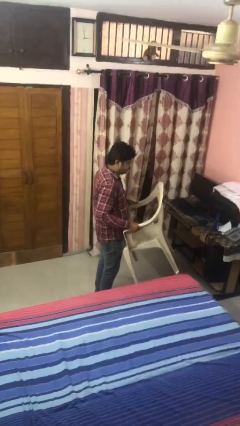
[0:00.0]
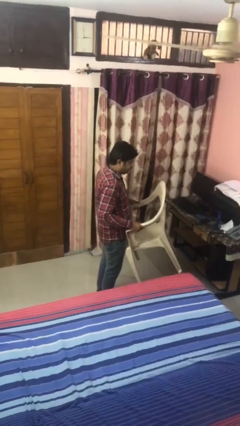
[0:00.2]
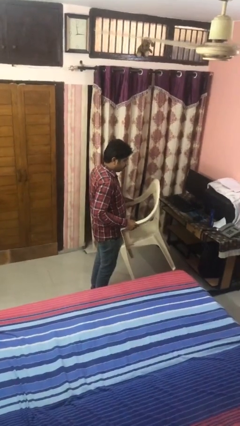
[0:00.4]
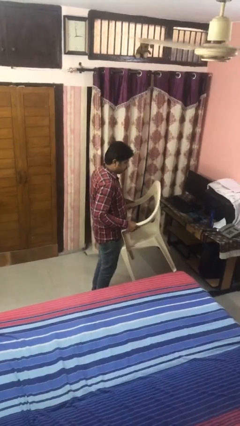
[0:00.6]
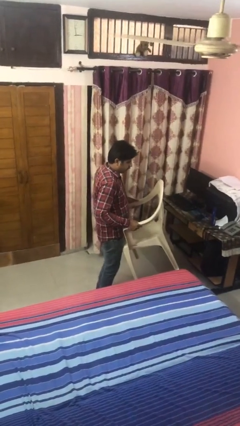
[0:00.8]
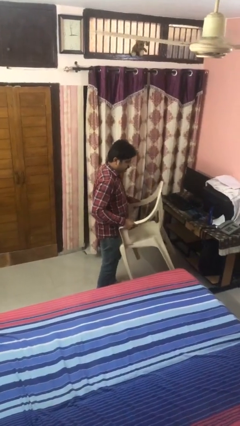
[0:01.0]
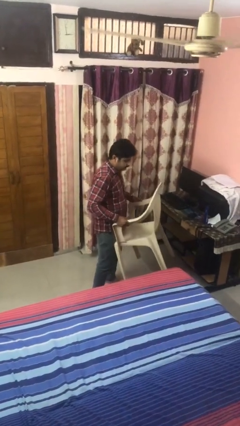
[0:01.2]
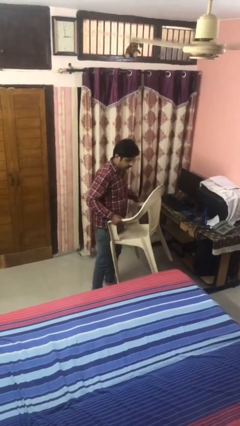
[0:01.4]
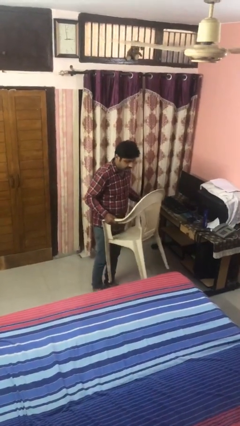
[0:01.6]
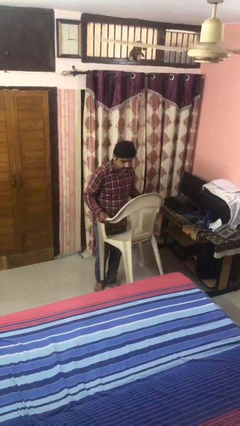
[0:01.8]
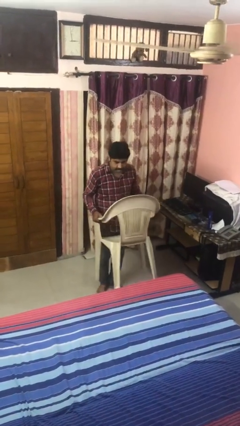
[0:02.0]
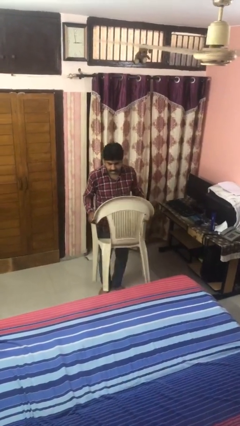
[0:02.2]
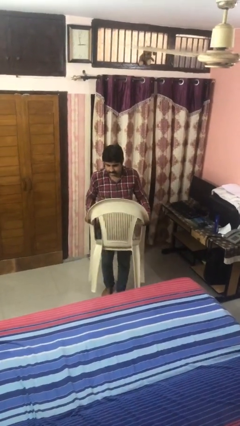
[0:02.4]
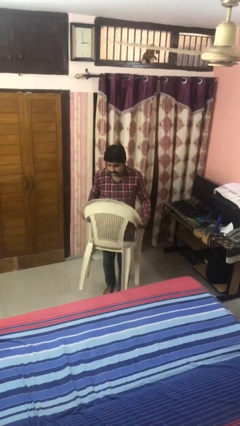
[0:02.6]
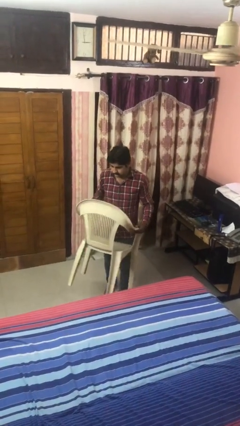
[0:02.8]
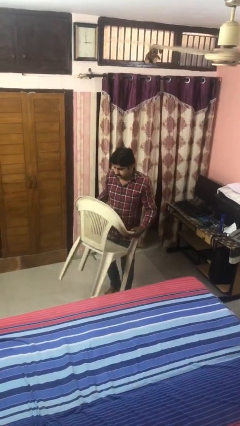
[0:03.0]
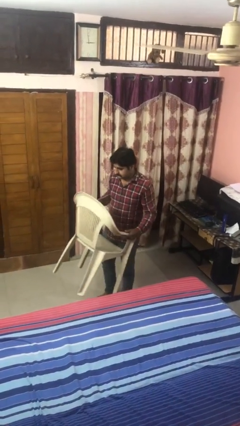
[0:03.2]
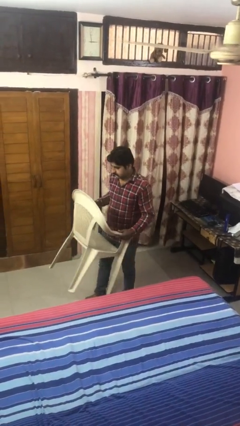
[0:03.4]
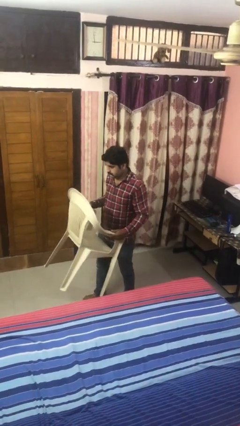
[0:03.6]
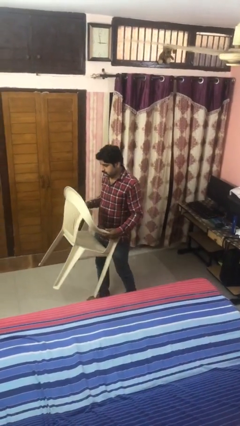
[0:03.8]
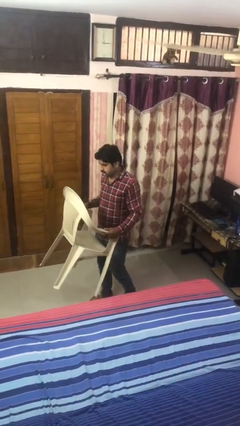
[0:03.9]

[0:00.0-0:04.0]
person carries furniture

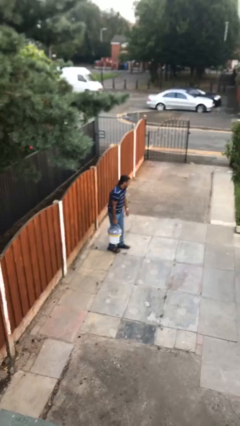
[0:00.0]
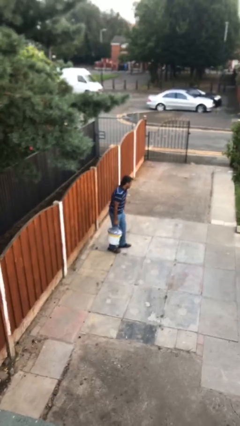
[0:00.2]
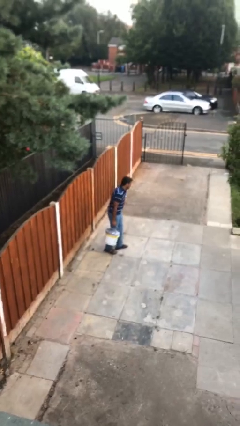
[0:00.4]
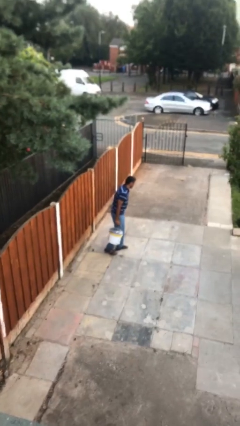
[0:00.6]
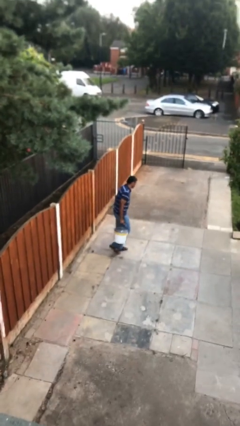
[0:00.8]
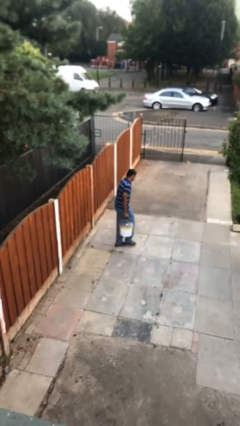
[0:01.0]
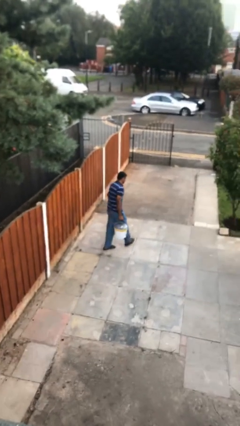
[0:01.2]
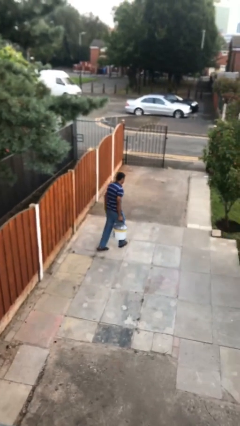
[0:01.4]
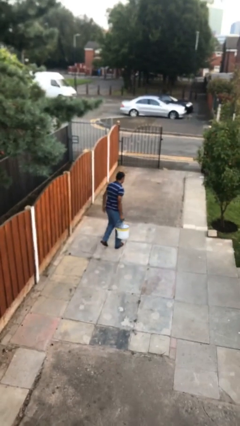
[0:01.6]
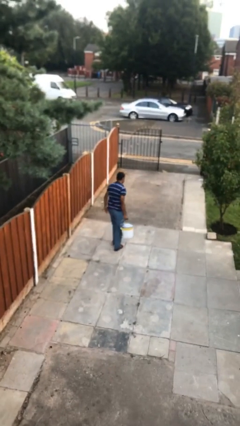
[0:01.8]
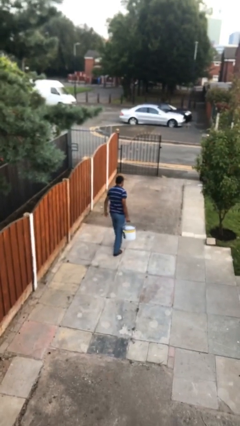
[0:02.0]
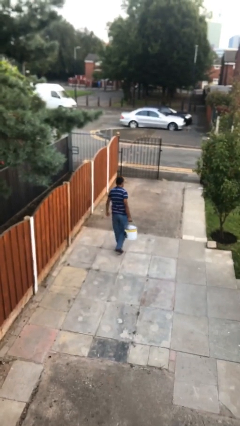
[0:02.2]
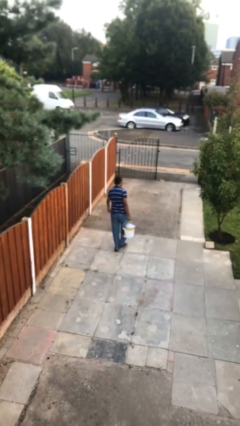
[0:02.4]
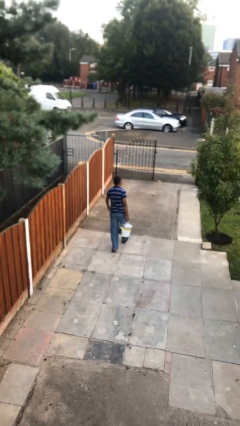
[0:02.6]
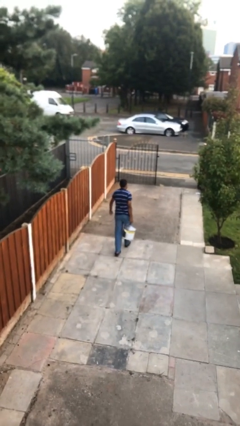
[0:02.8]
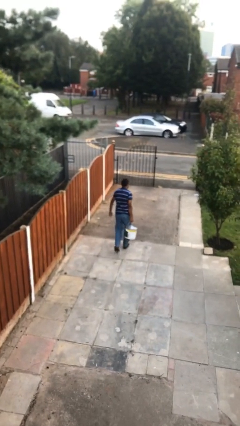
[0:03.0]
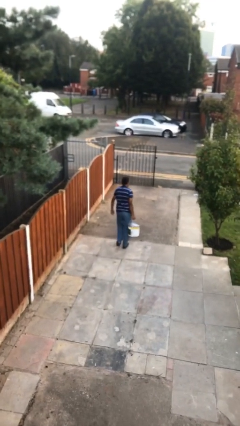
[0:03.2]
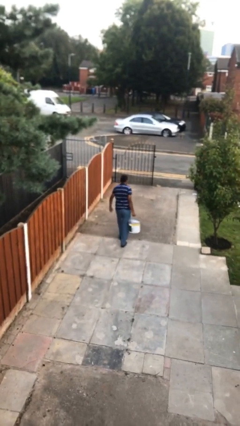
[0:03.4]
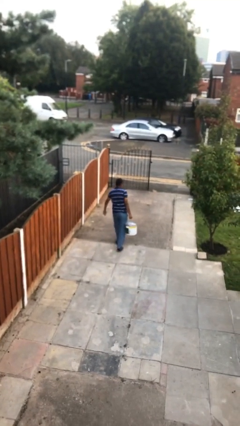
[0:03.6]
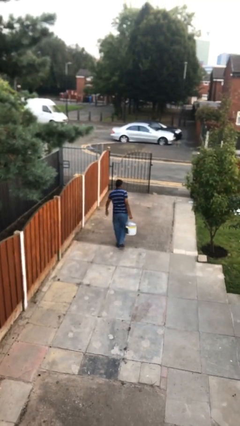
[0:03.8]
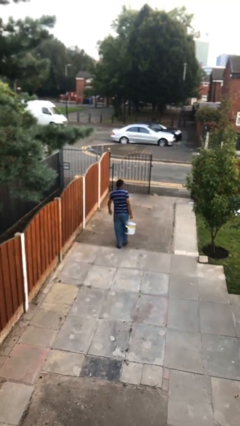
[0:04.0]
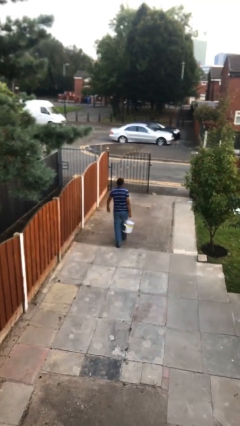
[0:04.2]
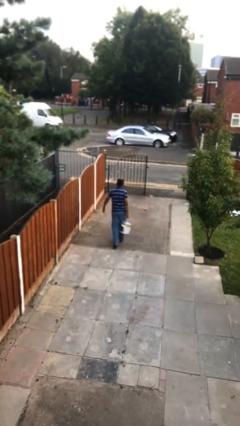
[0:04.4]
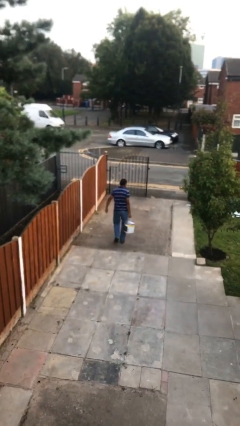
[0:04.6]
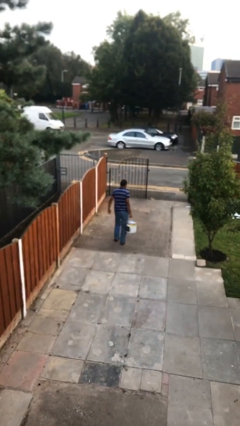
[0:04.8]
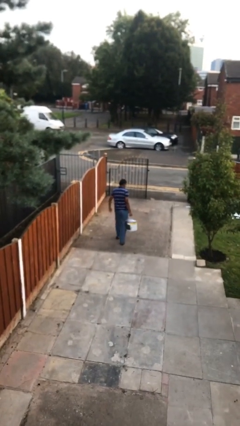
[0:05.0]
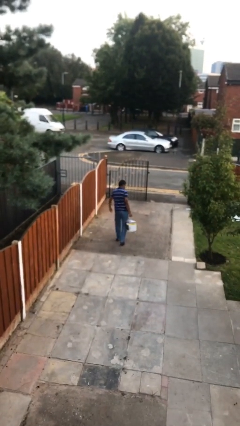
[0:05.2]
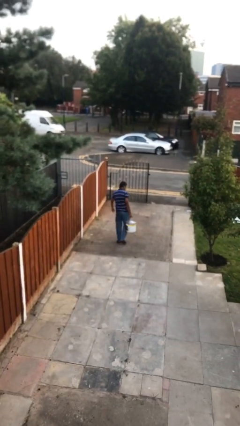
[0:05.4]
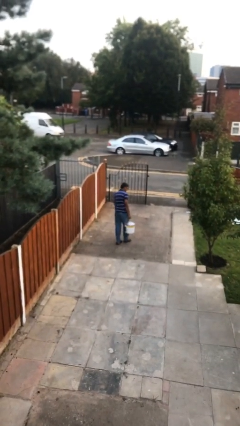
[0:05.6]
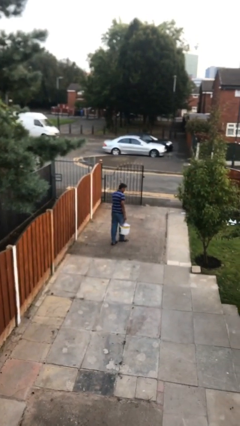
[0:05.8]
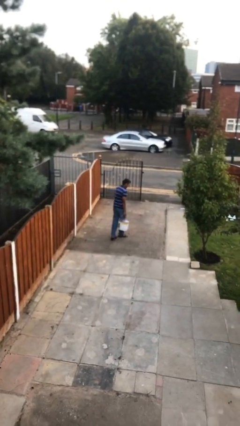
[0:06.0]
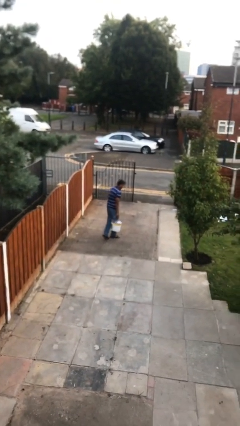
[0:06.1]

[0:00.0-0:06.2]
person carries heavy object

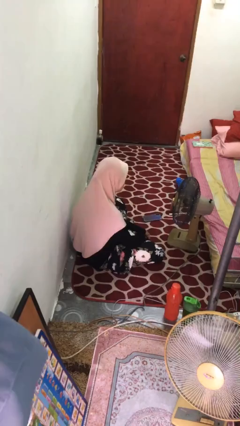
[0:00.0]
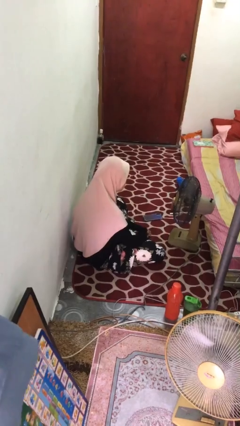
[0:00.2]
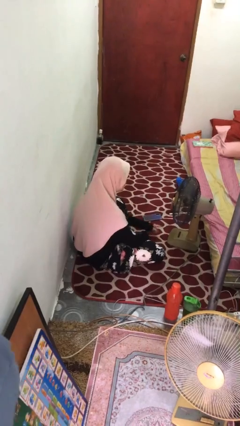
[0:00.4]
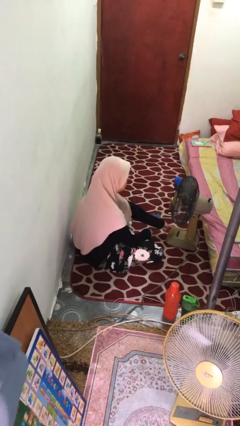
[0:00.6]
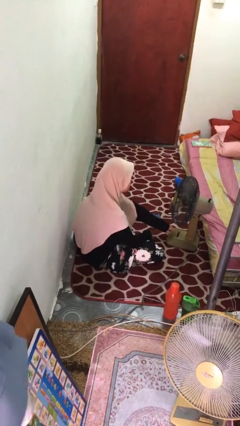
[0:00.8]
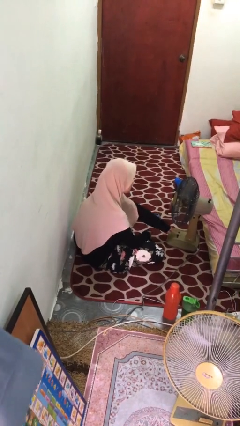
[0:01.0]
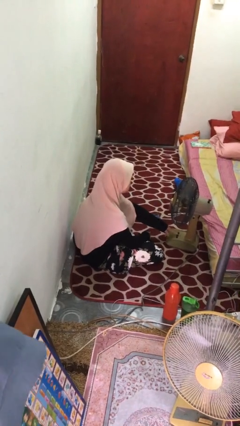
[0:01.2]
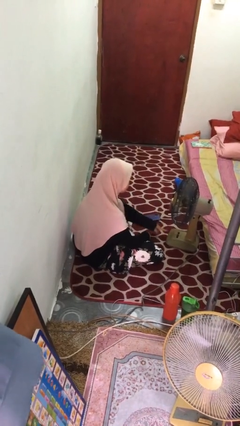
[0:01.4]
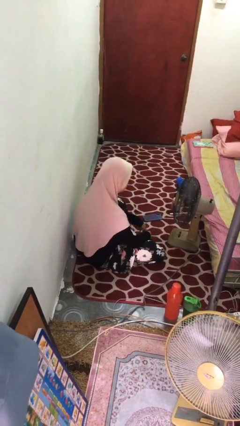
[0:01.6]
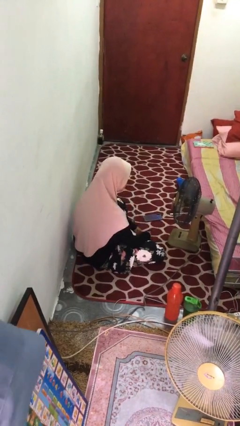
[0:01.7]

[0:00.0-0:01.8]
person turns off fan

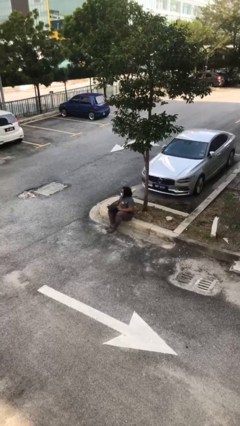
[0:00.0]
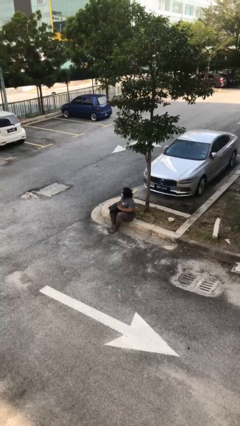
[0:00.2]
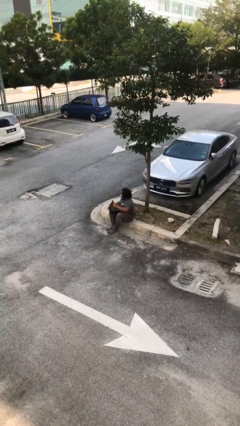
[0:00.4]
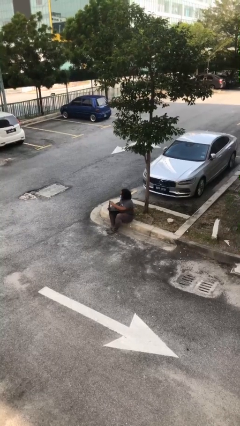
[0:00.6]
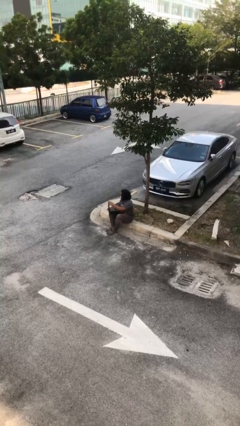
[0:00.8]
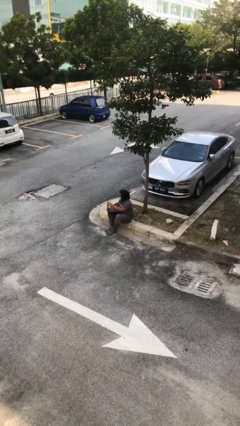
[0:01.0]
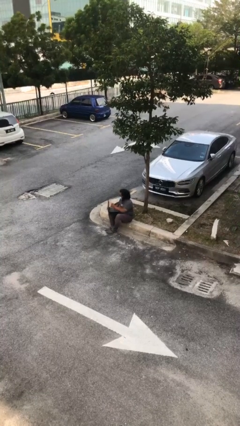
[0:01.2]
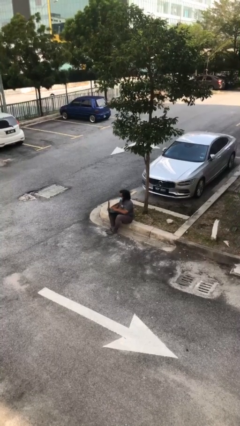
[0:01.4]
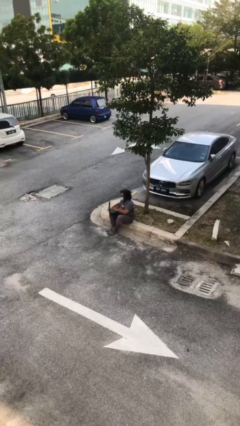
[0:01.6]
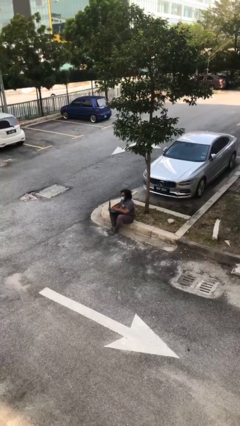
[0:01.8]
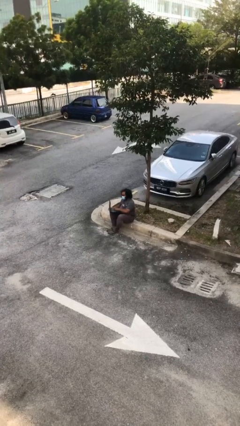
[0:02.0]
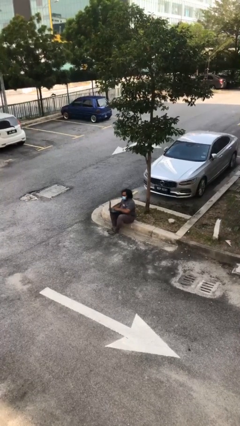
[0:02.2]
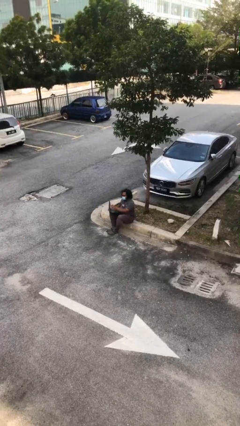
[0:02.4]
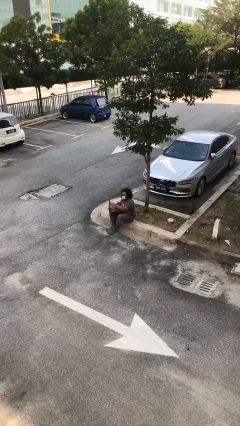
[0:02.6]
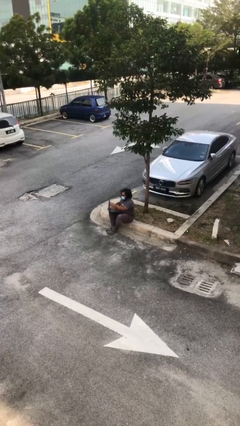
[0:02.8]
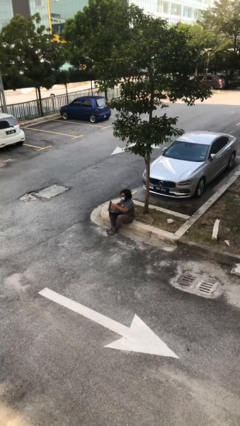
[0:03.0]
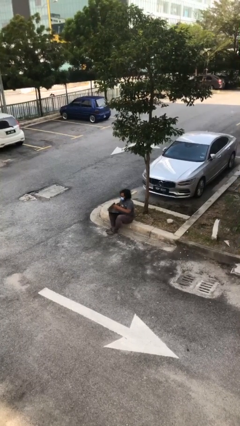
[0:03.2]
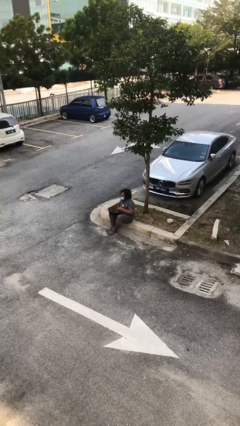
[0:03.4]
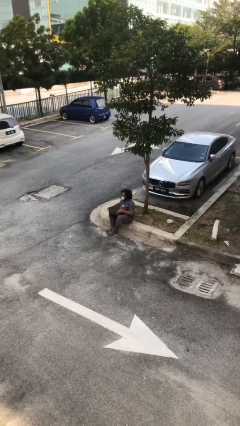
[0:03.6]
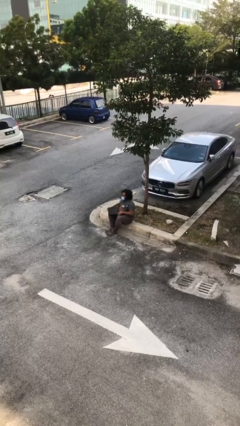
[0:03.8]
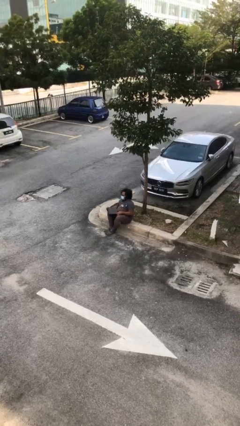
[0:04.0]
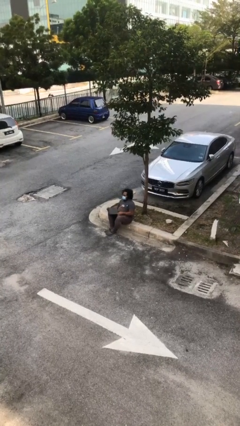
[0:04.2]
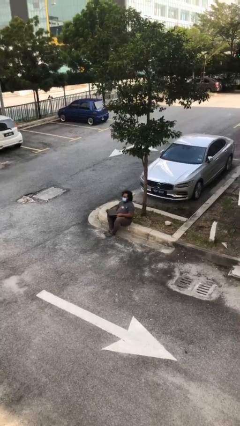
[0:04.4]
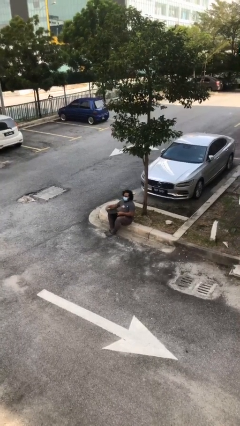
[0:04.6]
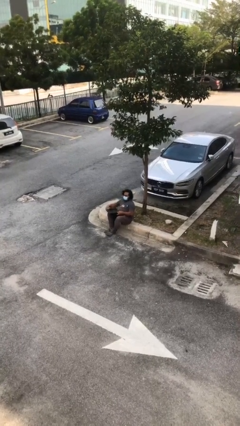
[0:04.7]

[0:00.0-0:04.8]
person interacts with laptop

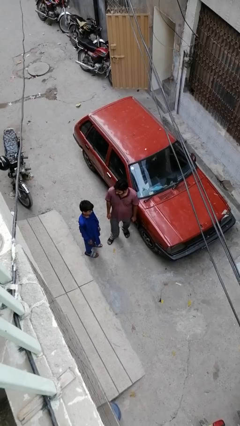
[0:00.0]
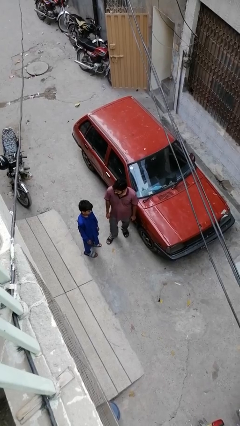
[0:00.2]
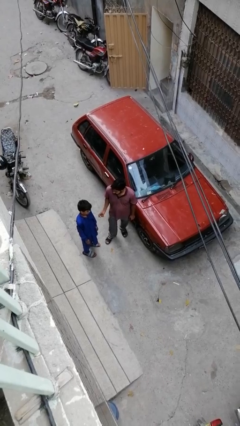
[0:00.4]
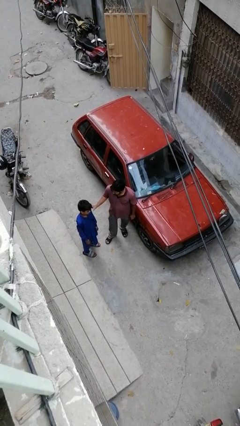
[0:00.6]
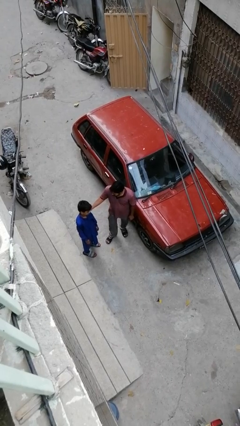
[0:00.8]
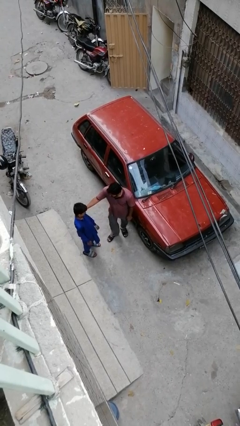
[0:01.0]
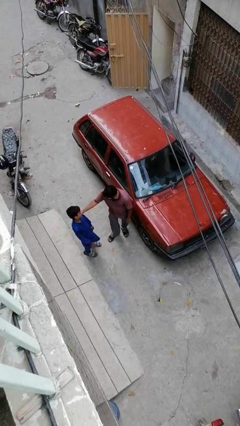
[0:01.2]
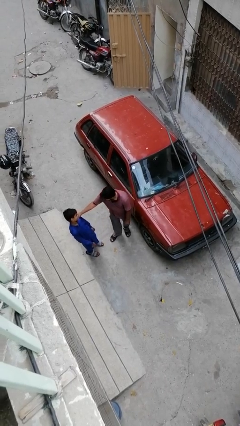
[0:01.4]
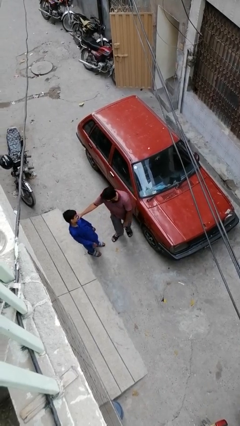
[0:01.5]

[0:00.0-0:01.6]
person grabs person by shoulder
